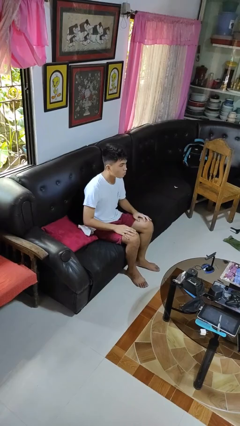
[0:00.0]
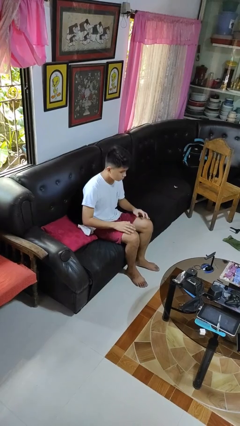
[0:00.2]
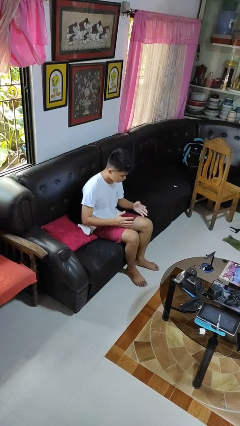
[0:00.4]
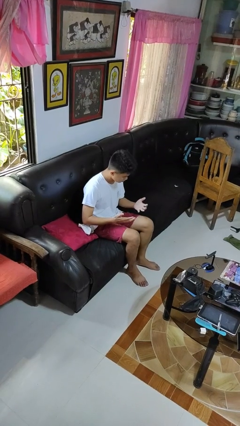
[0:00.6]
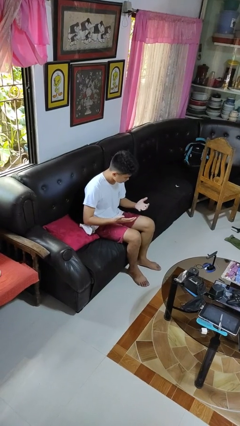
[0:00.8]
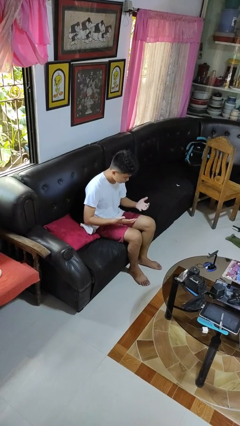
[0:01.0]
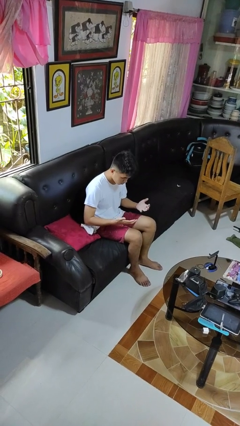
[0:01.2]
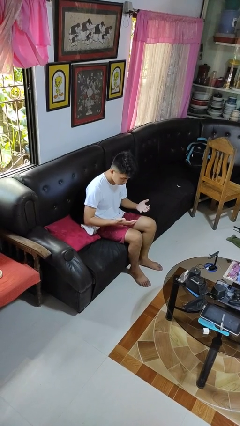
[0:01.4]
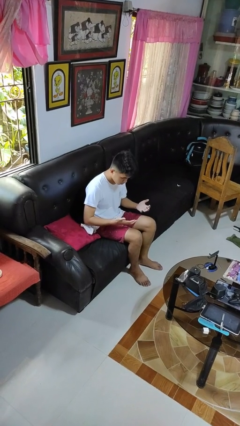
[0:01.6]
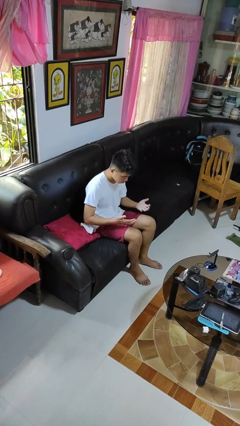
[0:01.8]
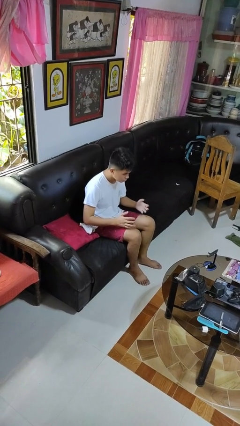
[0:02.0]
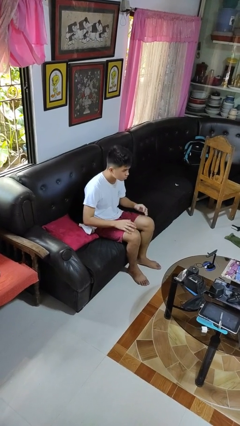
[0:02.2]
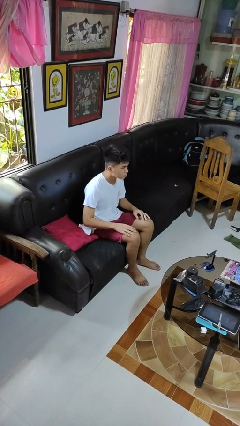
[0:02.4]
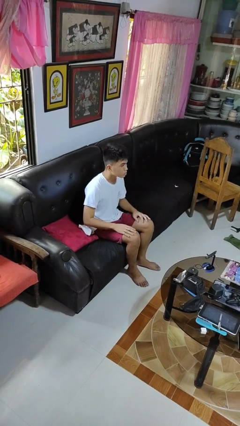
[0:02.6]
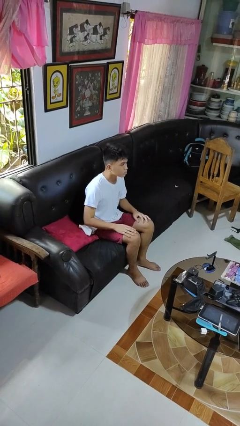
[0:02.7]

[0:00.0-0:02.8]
person looks at hands in lap

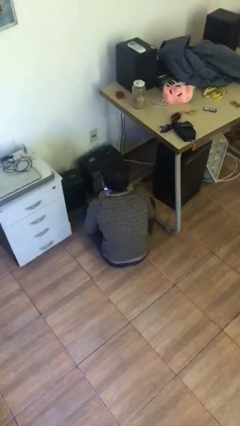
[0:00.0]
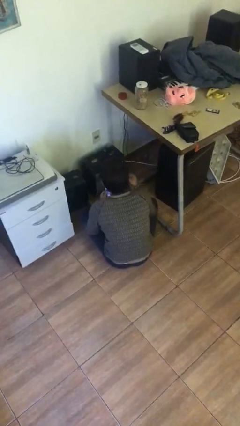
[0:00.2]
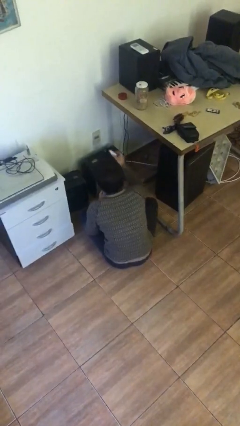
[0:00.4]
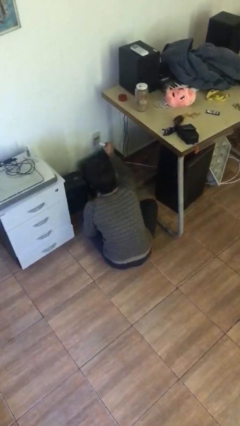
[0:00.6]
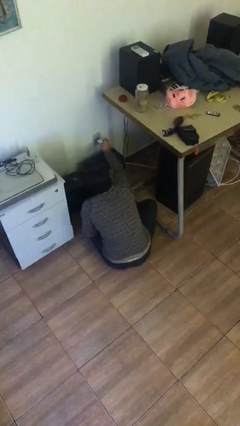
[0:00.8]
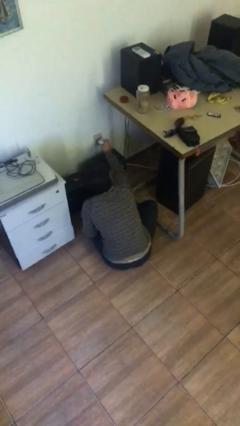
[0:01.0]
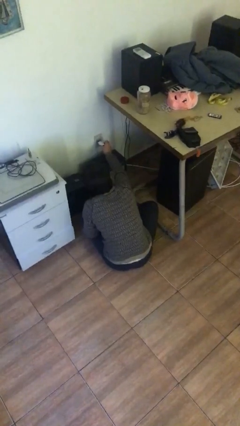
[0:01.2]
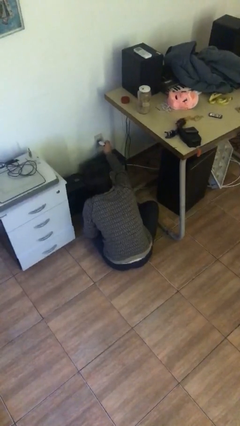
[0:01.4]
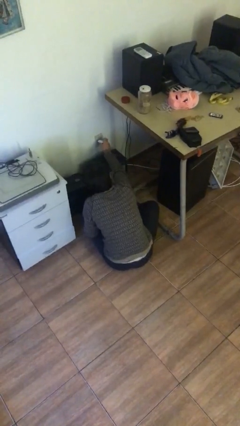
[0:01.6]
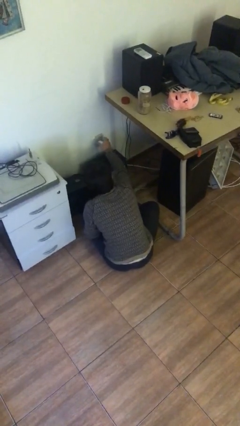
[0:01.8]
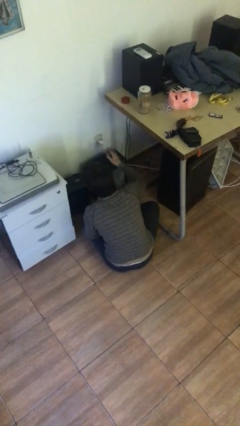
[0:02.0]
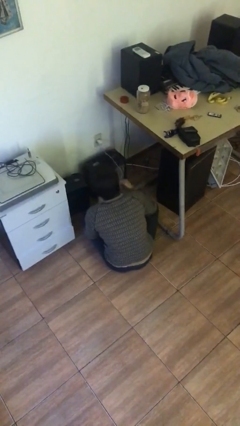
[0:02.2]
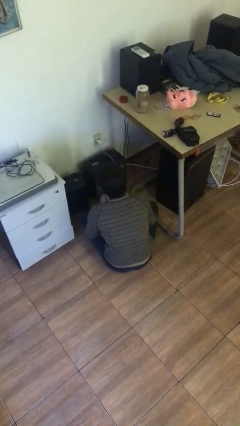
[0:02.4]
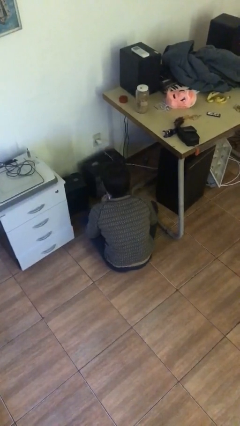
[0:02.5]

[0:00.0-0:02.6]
person plugs into electrical socket

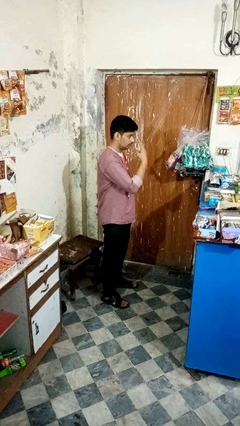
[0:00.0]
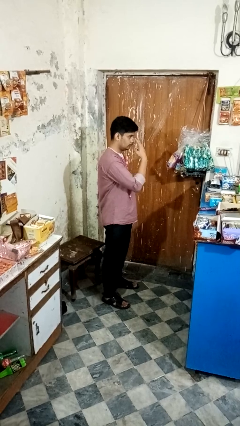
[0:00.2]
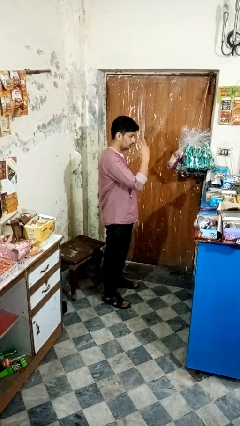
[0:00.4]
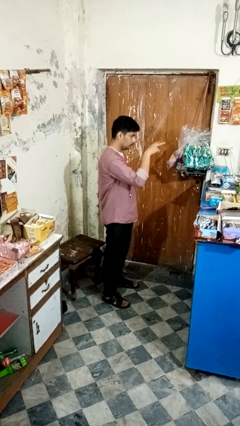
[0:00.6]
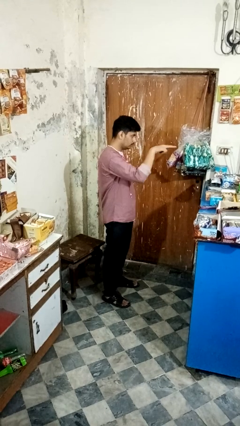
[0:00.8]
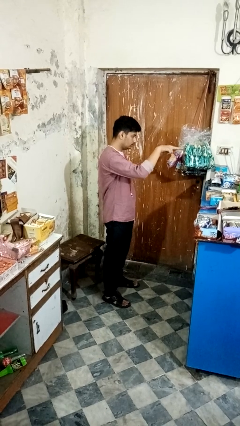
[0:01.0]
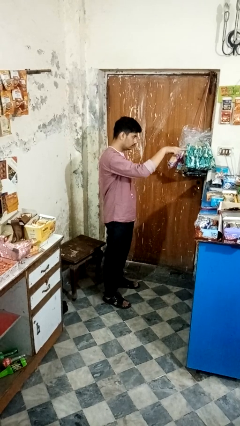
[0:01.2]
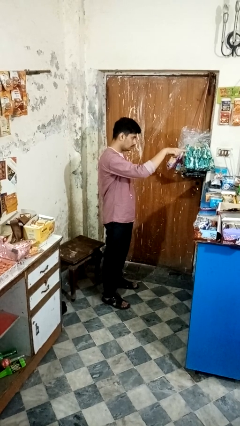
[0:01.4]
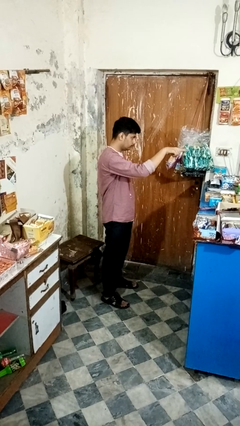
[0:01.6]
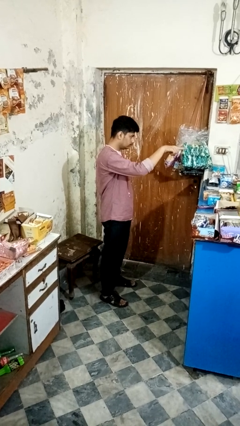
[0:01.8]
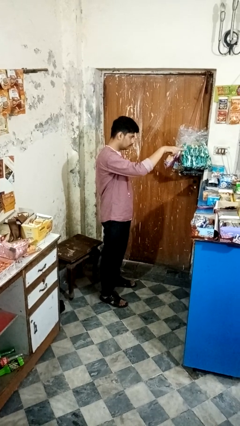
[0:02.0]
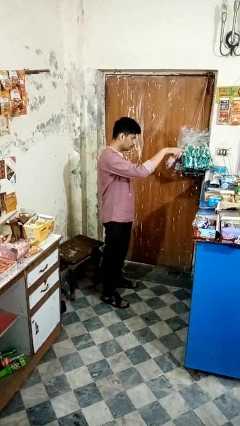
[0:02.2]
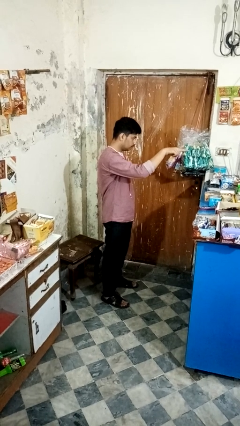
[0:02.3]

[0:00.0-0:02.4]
person gestures watch closely

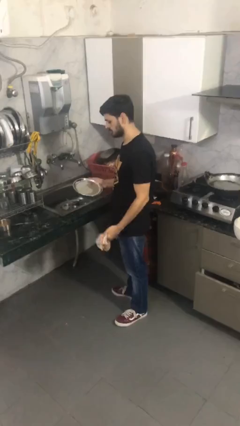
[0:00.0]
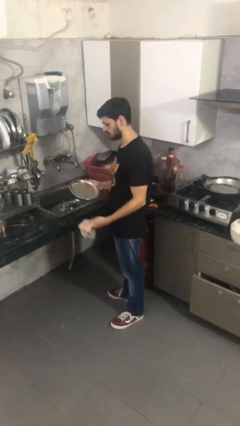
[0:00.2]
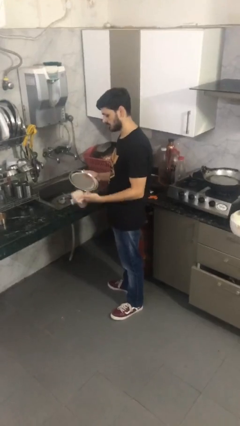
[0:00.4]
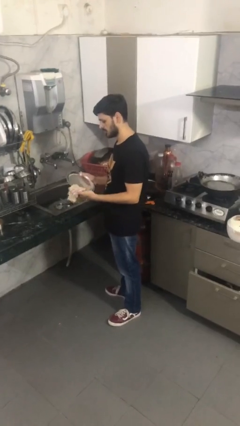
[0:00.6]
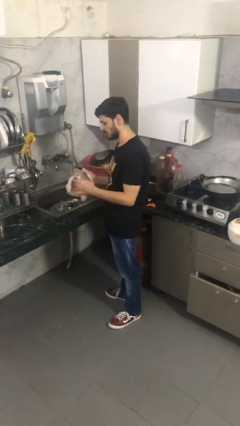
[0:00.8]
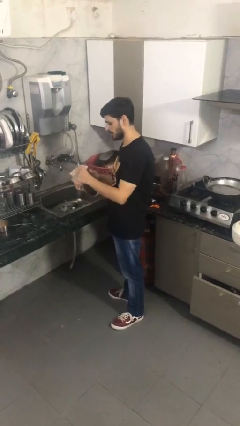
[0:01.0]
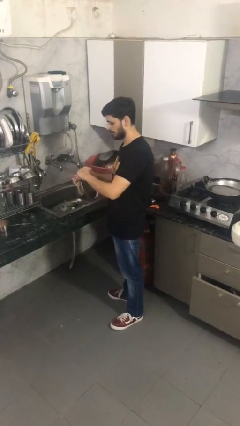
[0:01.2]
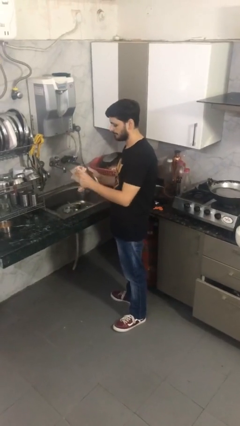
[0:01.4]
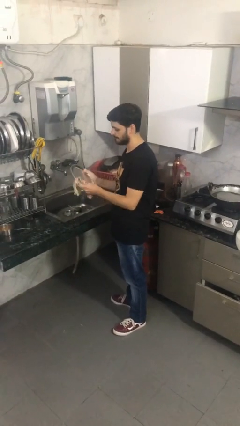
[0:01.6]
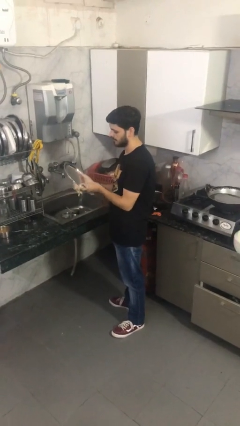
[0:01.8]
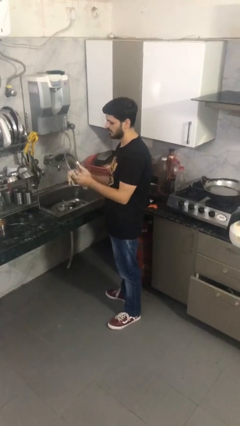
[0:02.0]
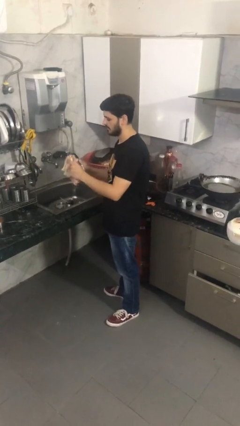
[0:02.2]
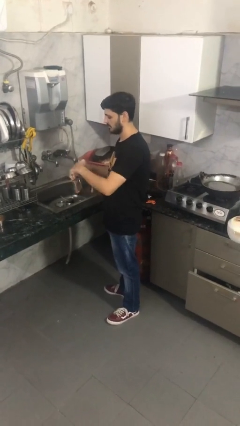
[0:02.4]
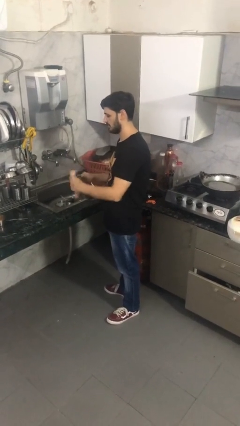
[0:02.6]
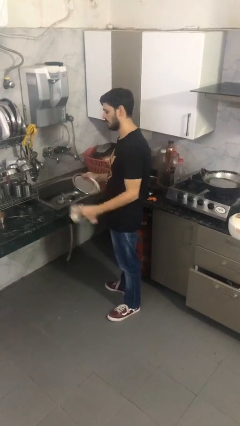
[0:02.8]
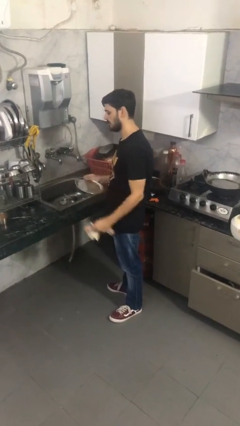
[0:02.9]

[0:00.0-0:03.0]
person dries dish

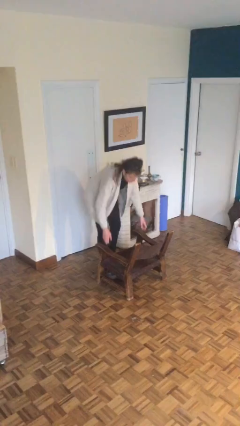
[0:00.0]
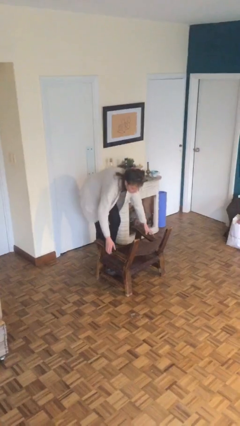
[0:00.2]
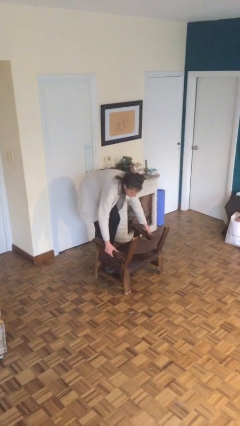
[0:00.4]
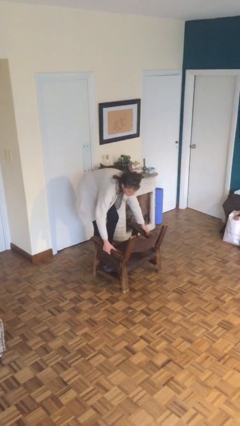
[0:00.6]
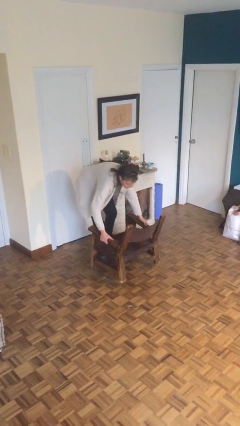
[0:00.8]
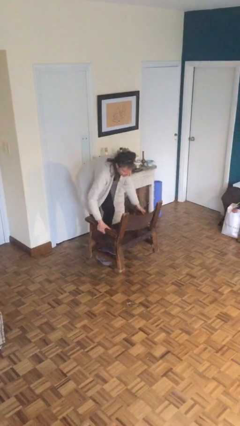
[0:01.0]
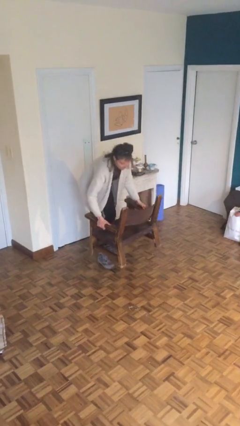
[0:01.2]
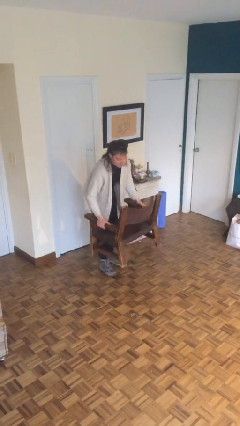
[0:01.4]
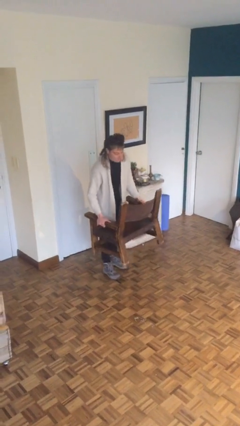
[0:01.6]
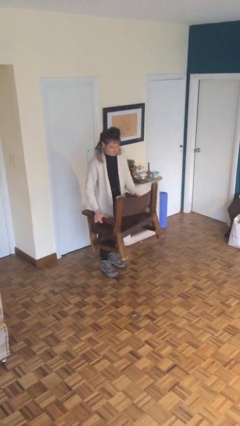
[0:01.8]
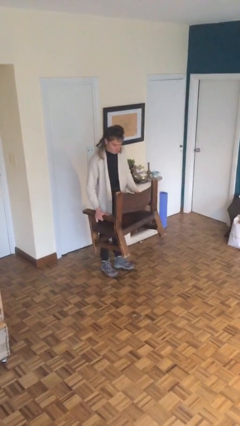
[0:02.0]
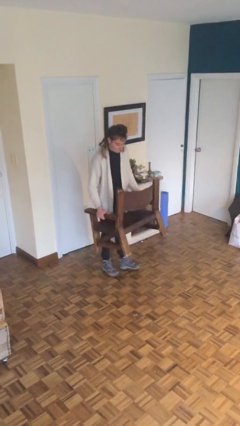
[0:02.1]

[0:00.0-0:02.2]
person picks up object from floor

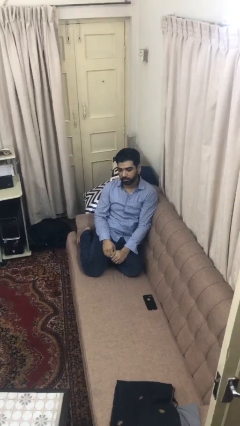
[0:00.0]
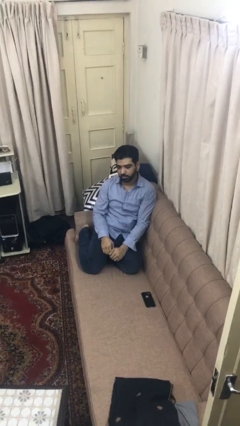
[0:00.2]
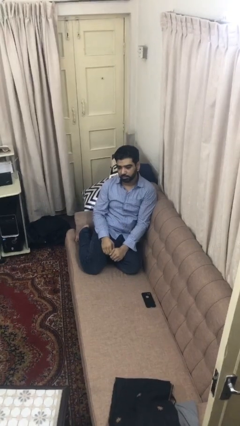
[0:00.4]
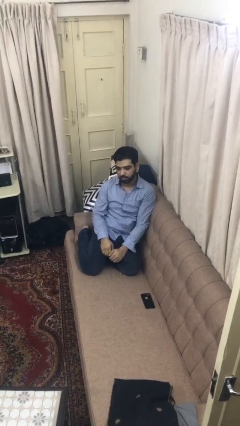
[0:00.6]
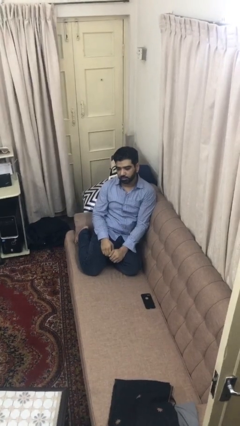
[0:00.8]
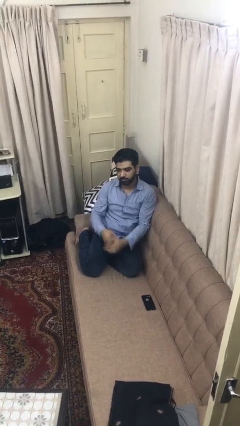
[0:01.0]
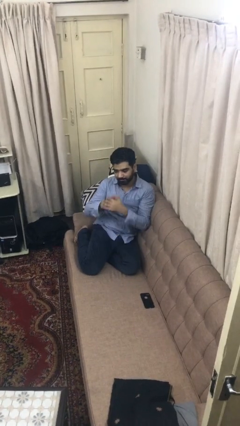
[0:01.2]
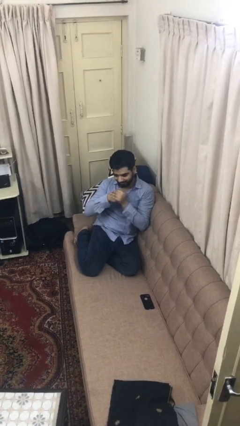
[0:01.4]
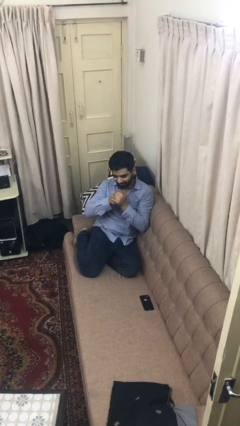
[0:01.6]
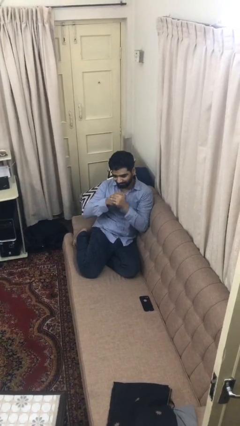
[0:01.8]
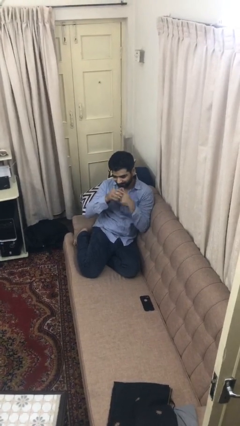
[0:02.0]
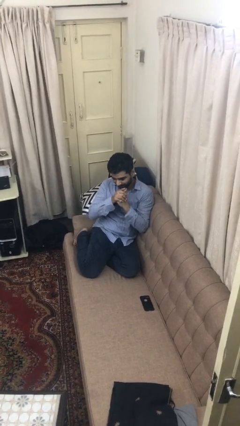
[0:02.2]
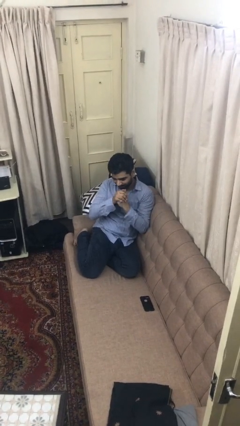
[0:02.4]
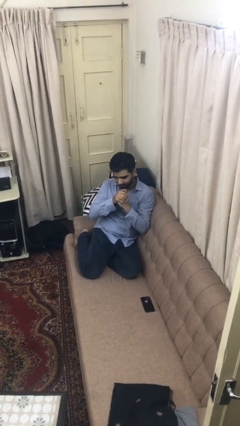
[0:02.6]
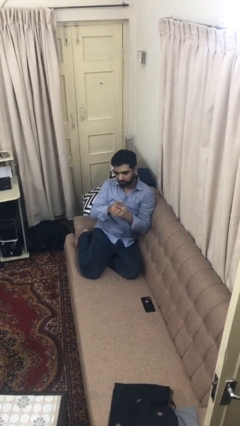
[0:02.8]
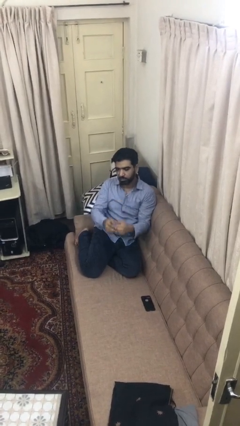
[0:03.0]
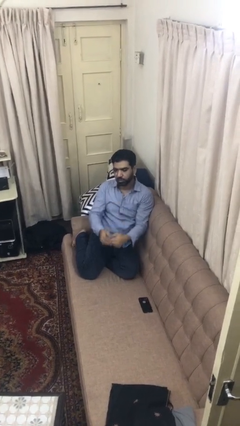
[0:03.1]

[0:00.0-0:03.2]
person cracks knuckles

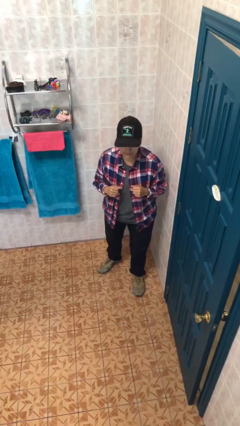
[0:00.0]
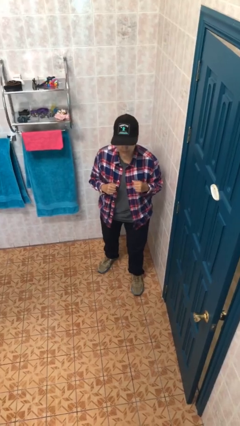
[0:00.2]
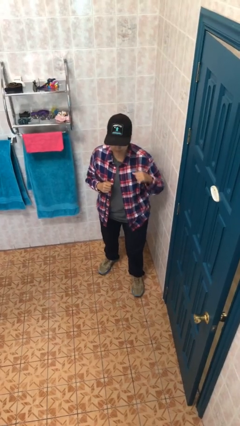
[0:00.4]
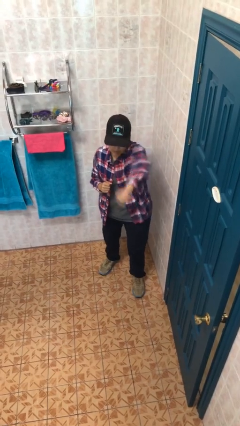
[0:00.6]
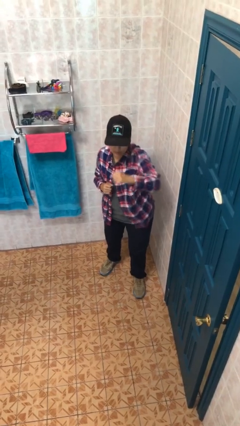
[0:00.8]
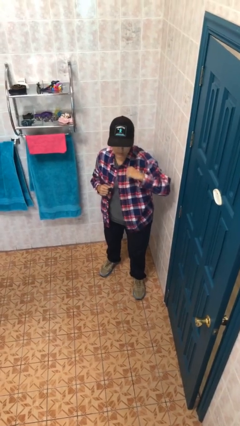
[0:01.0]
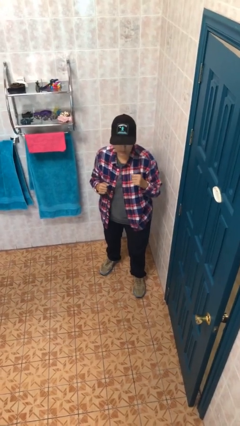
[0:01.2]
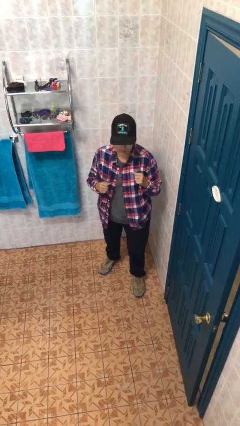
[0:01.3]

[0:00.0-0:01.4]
person punches
